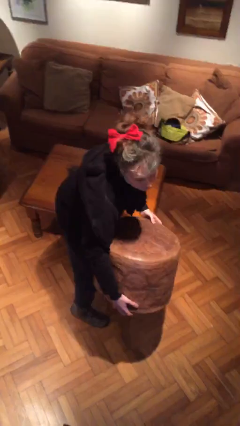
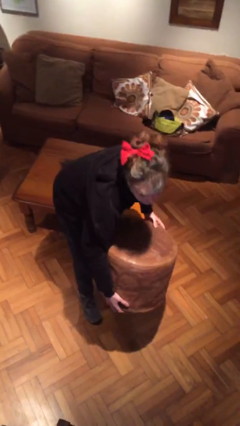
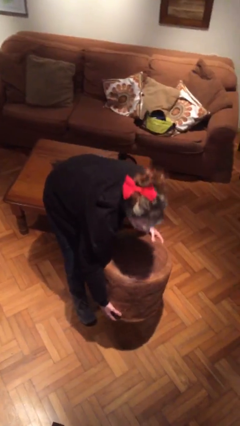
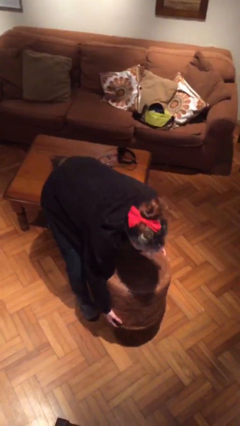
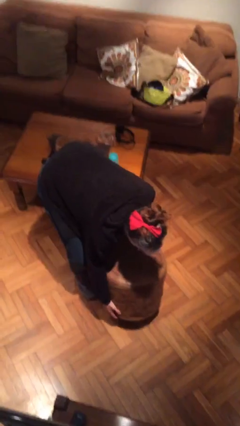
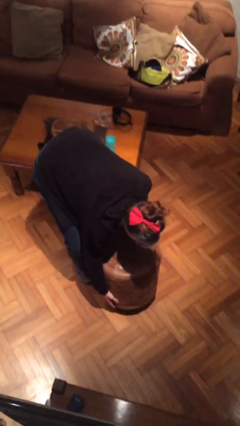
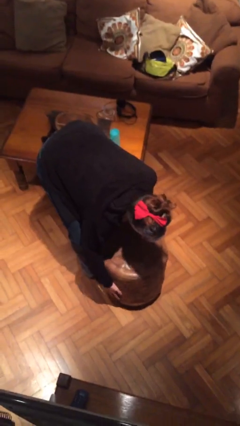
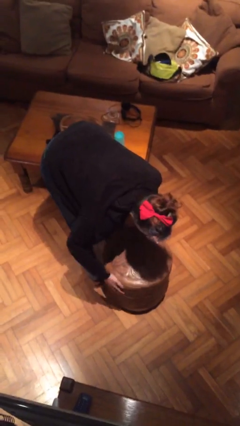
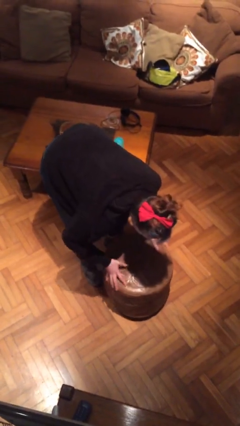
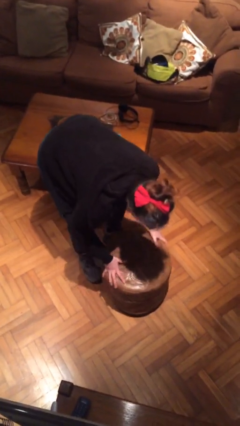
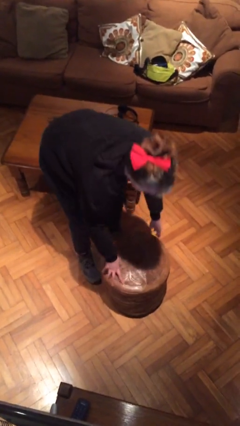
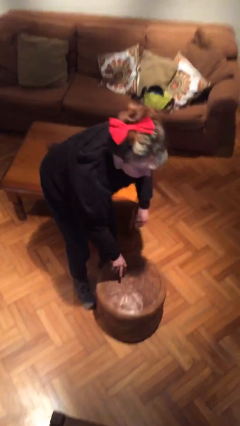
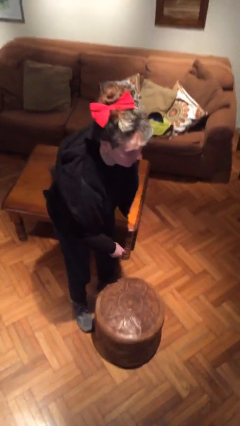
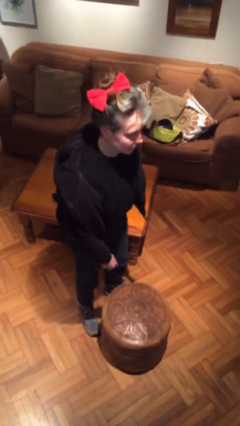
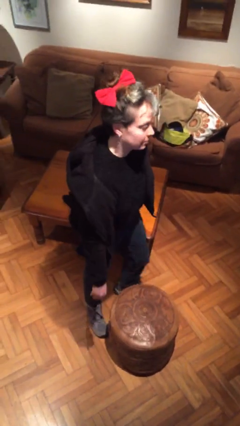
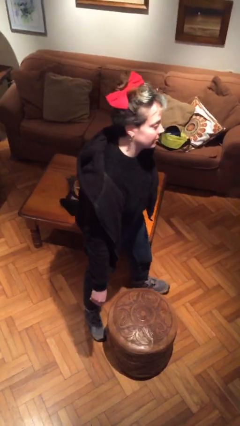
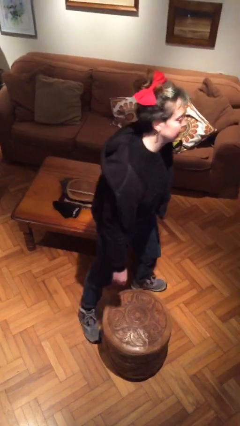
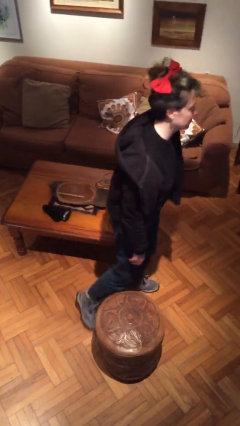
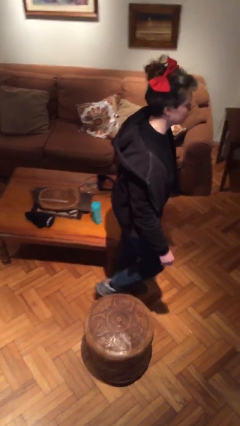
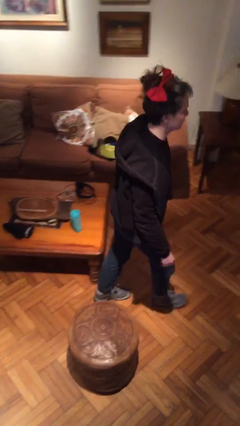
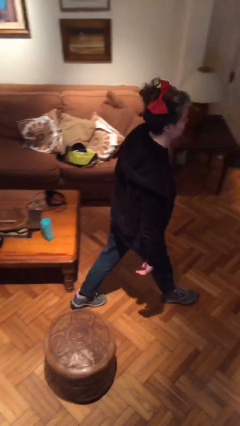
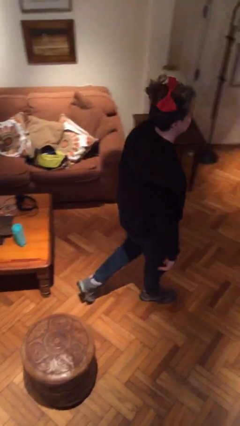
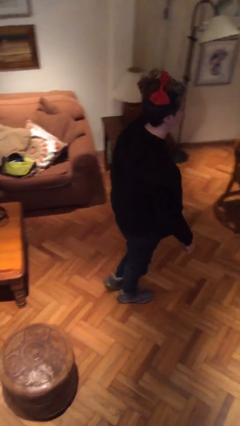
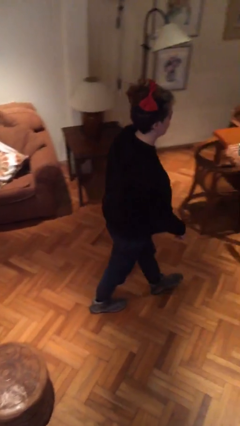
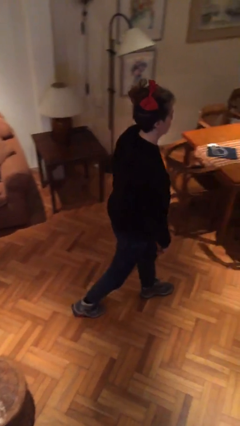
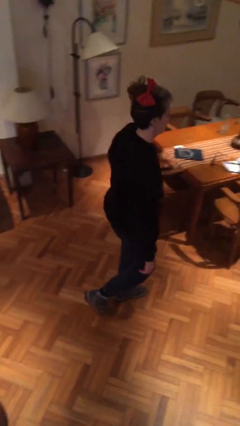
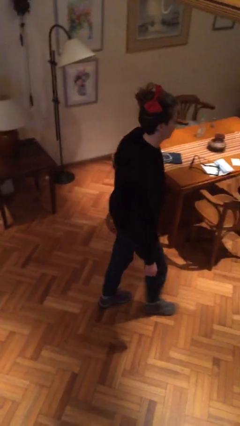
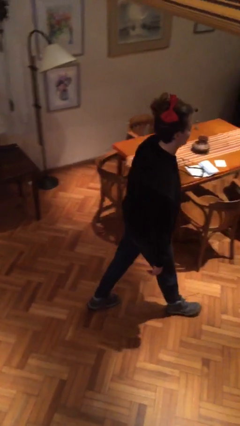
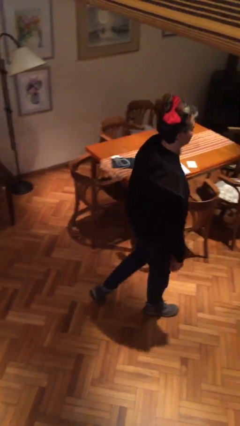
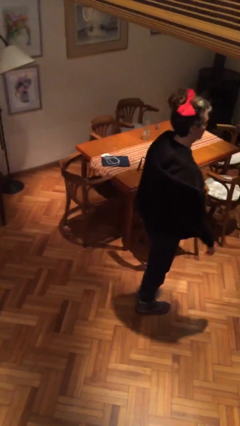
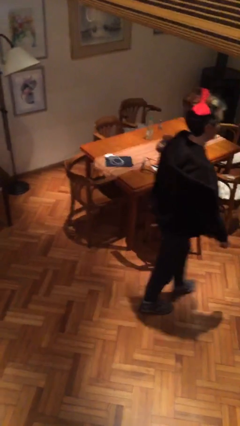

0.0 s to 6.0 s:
person puts down object on floor

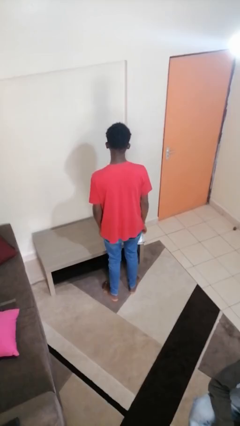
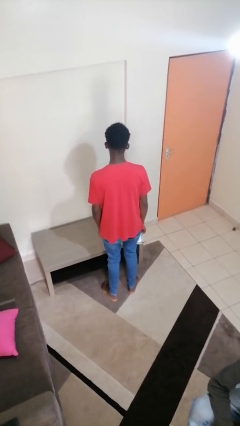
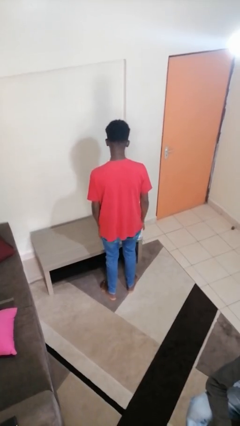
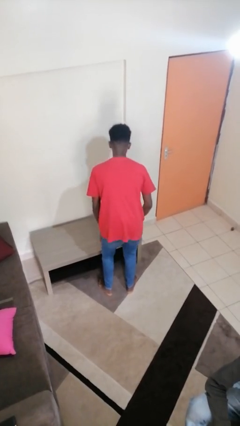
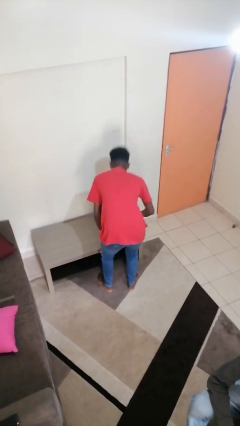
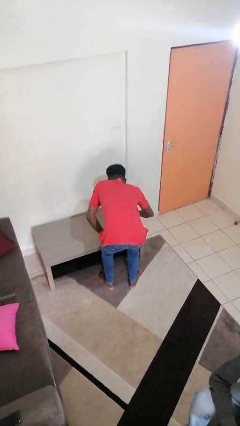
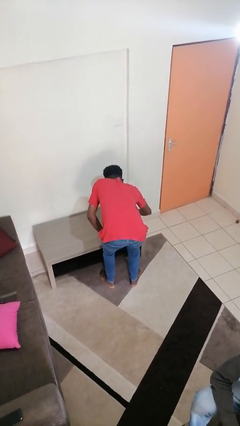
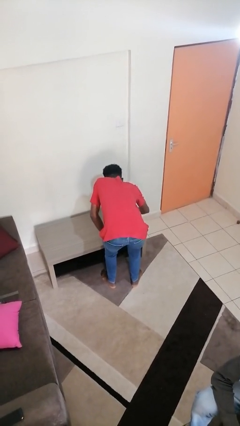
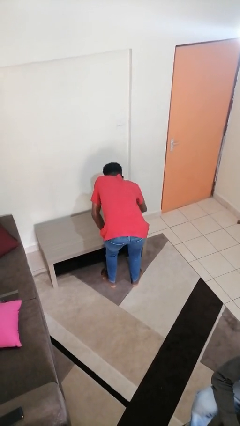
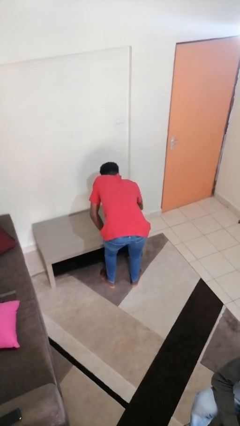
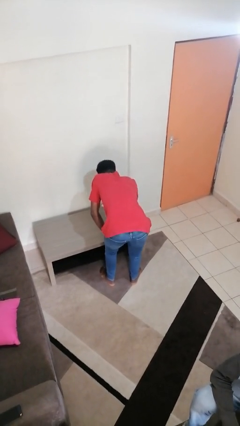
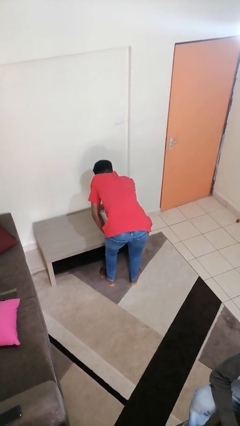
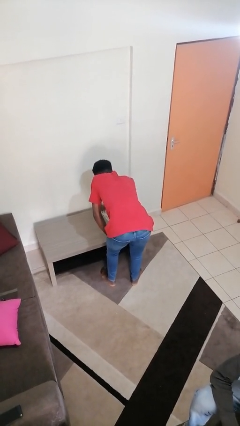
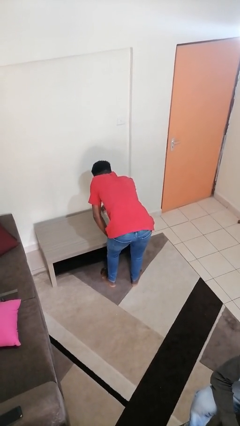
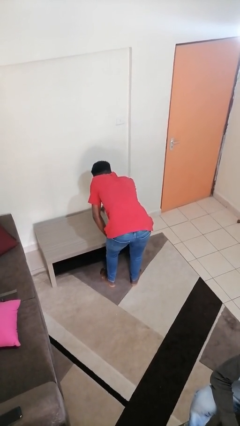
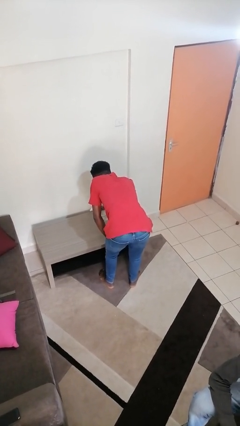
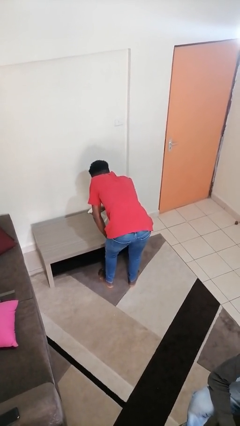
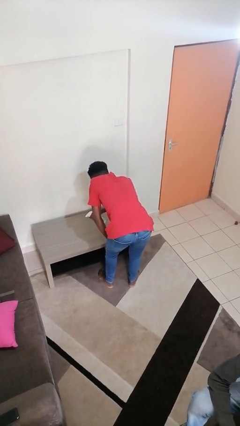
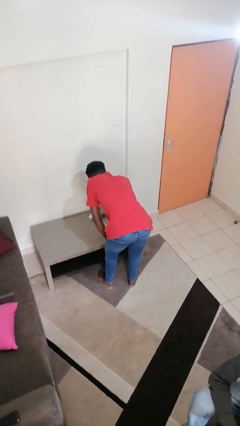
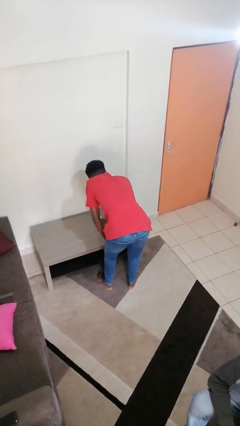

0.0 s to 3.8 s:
person sprays from bottle

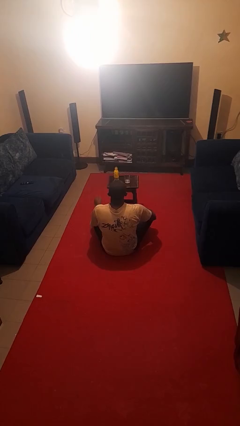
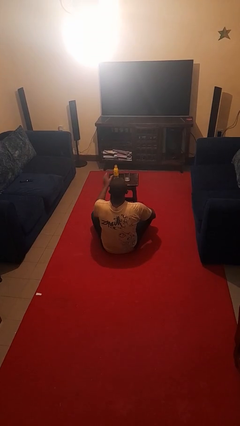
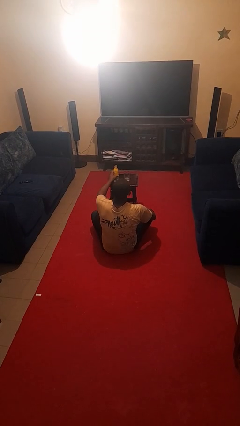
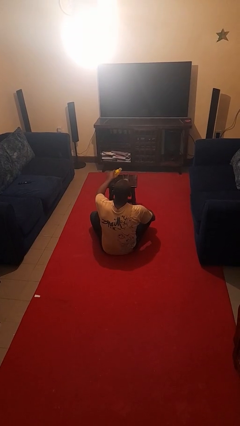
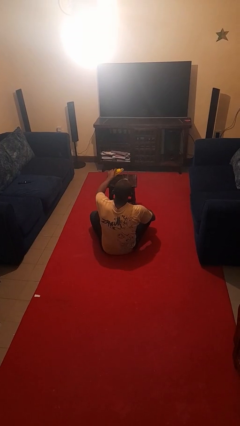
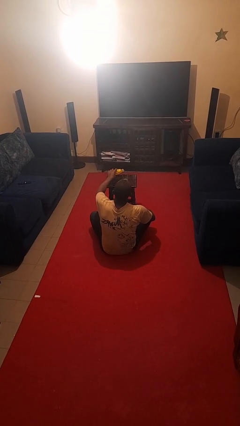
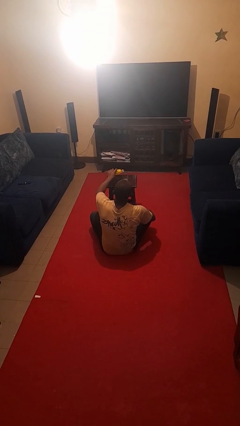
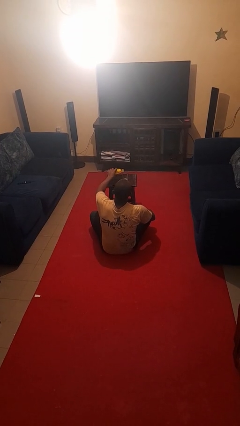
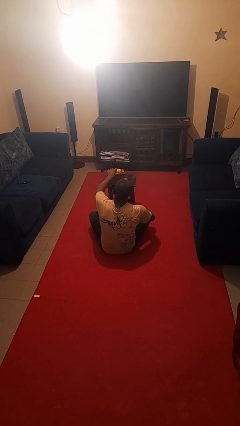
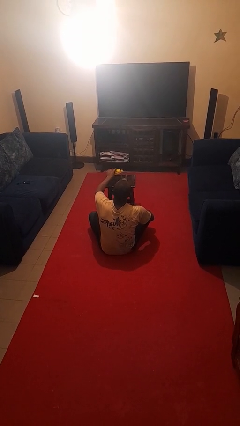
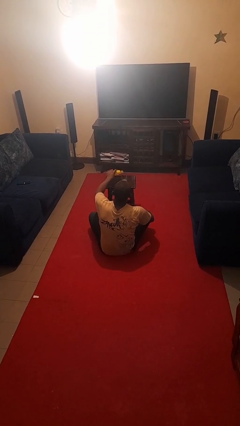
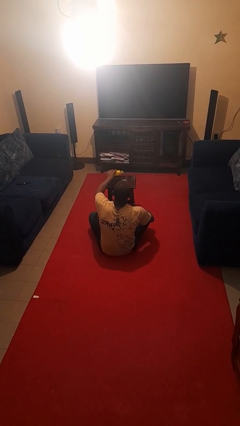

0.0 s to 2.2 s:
person pours liquid into cup

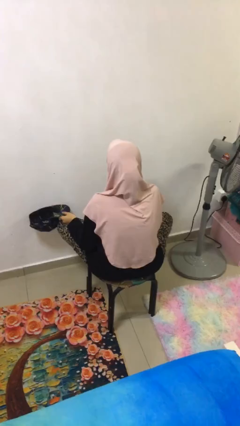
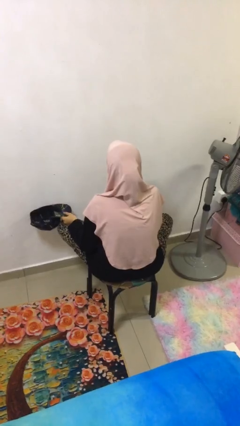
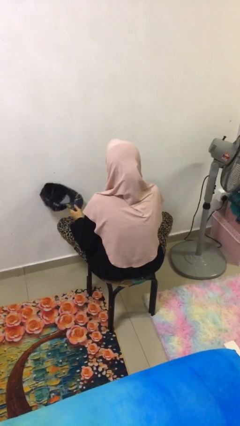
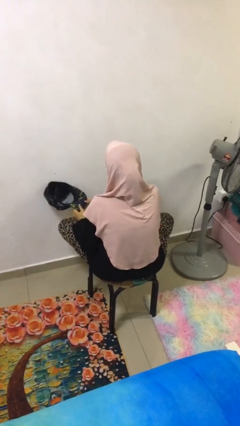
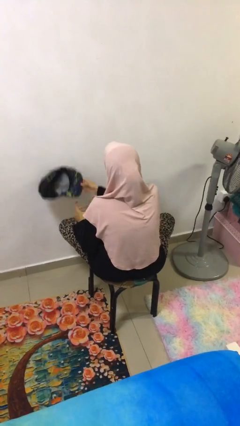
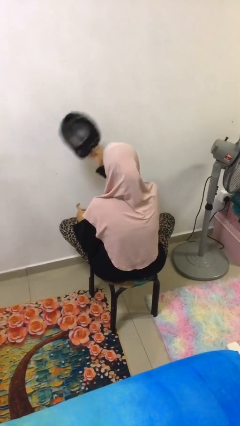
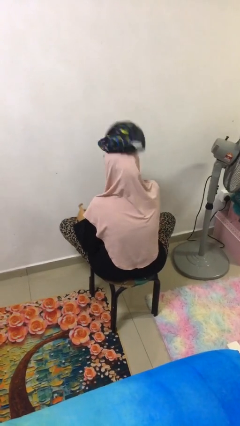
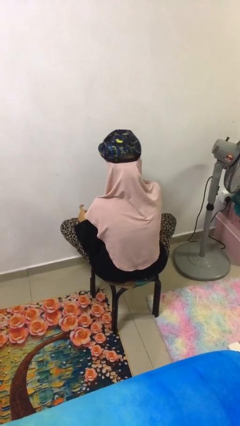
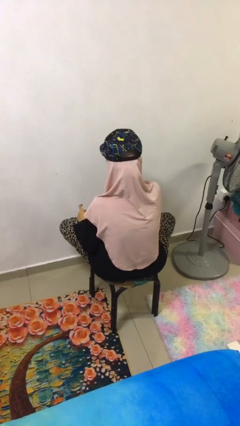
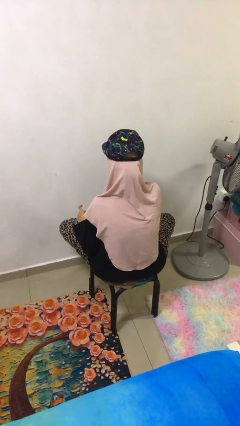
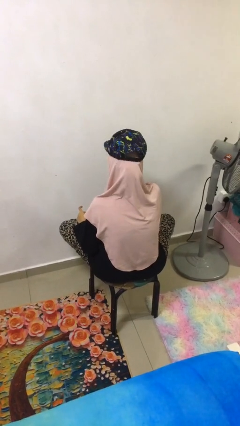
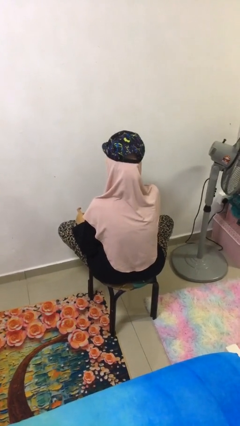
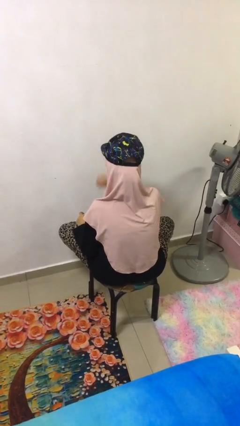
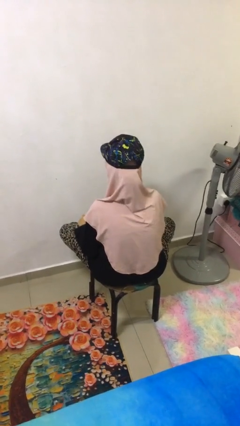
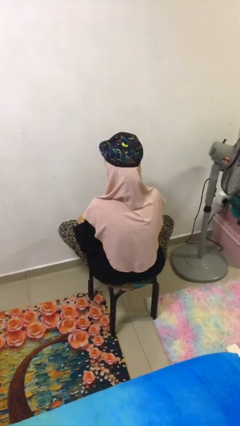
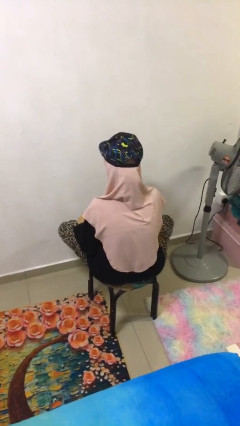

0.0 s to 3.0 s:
person puts on hat

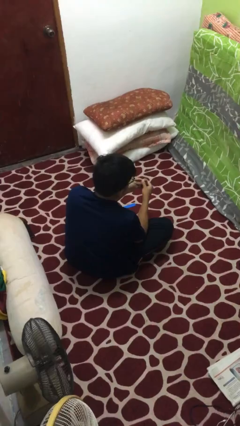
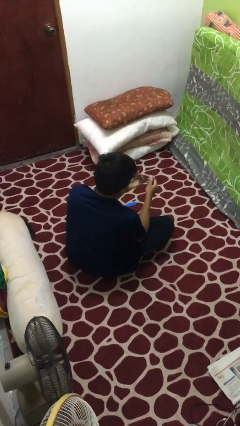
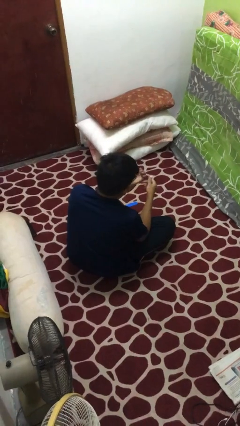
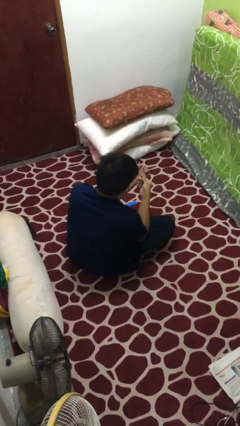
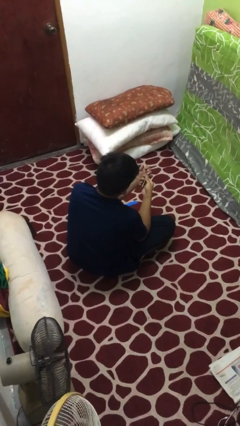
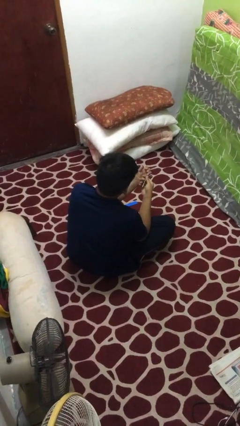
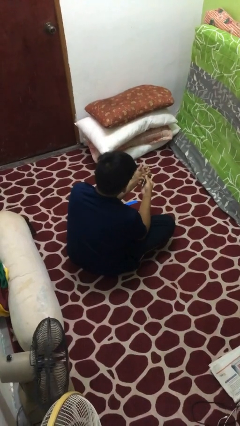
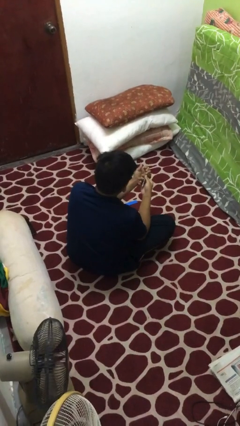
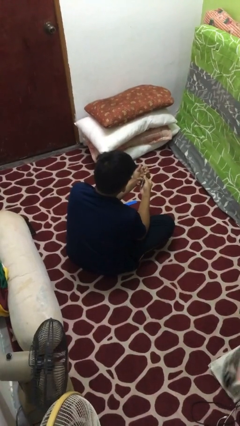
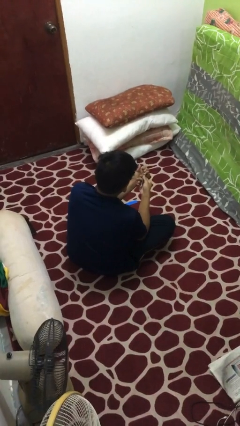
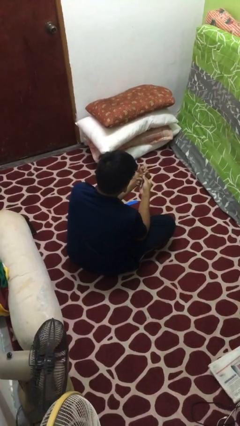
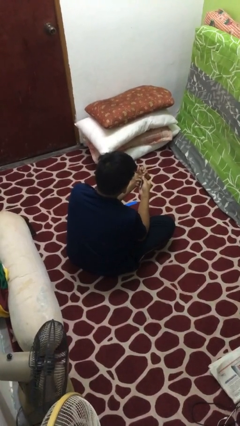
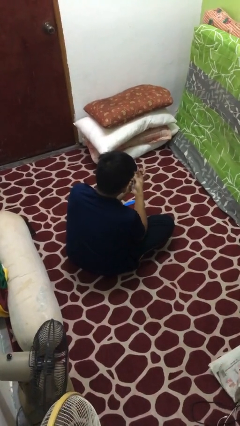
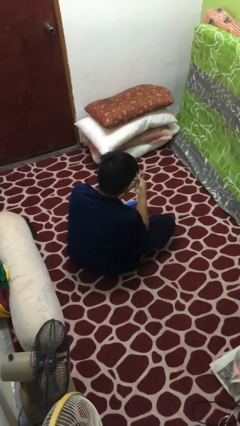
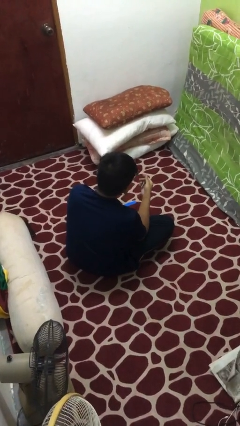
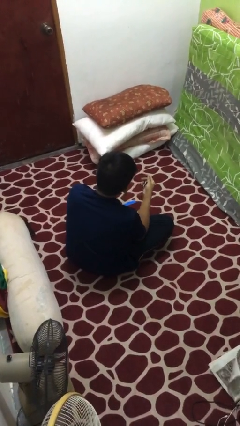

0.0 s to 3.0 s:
person clips fingernails
